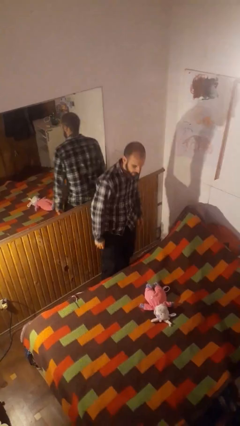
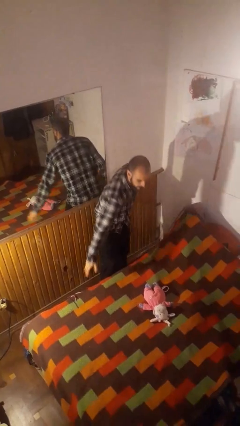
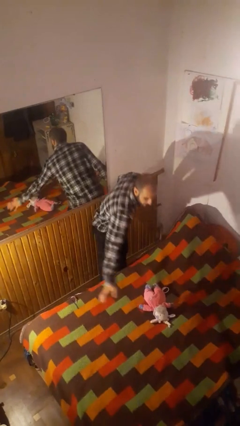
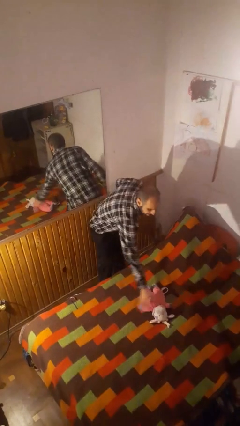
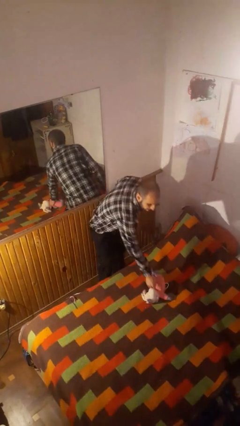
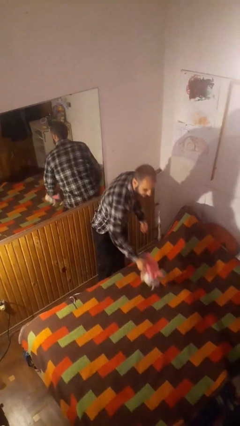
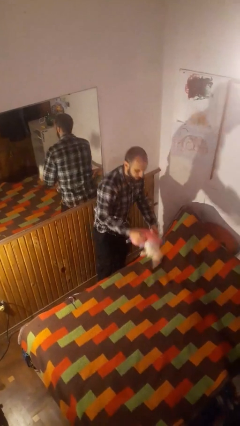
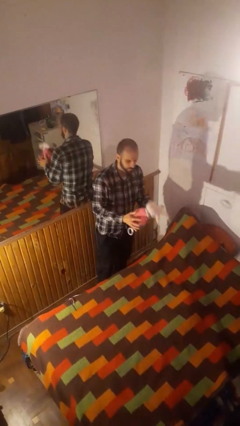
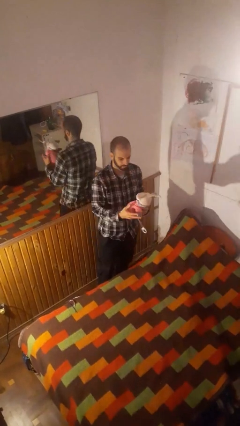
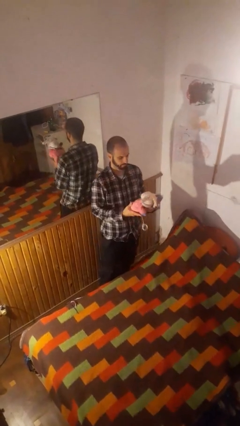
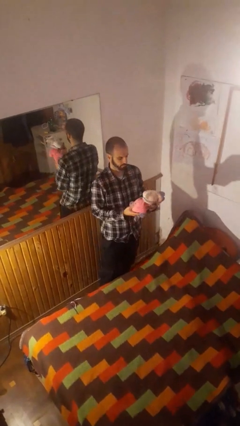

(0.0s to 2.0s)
person picks up object from bed

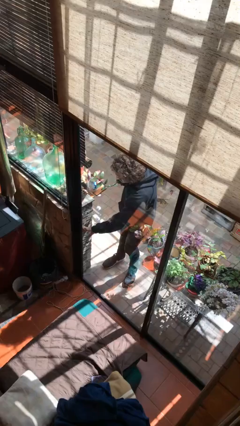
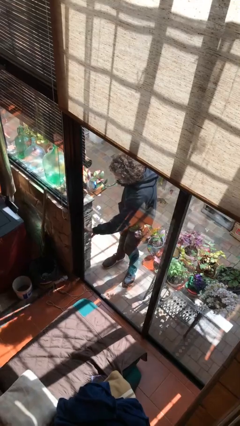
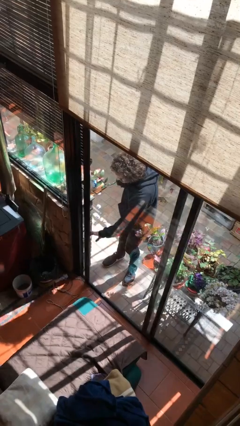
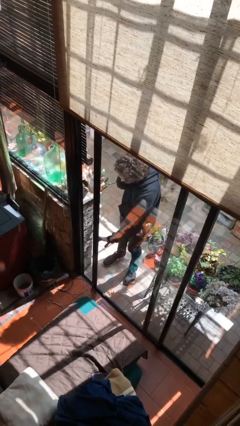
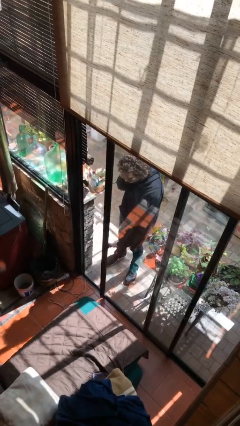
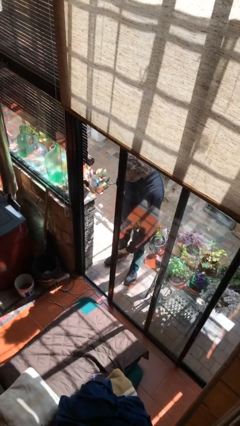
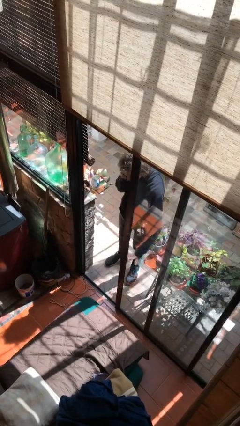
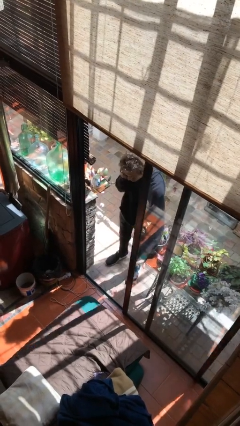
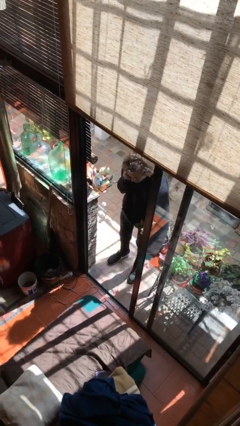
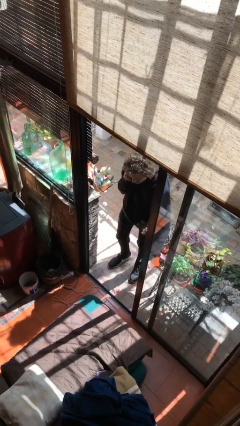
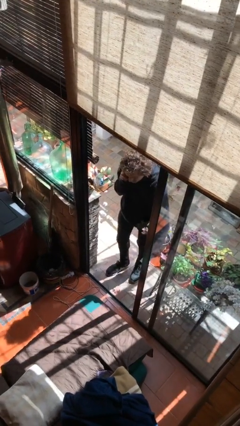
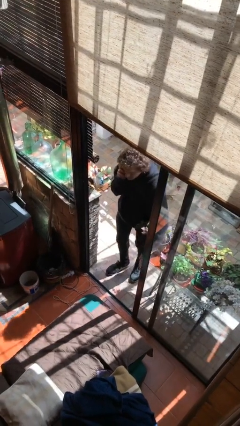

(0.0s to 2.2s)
person opens facility door

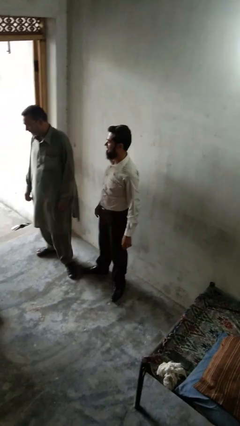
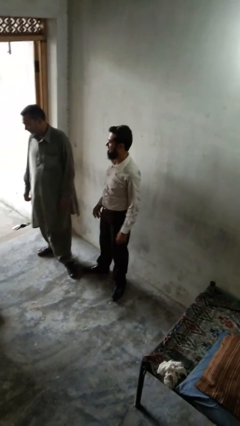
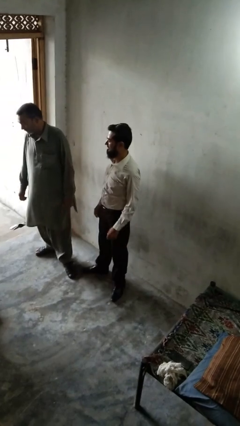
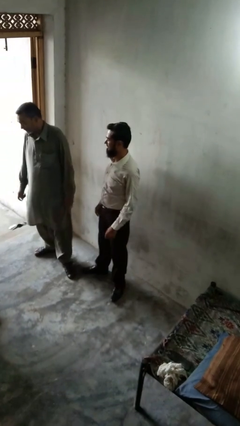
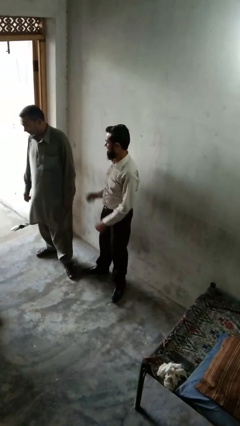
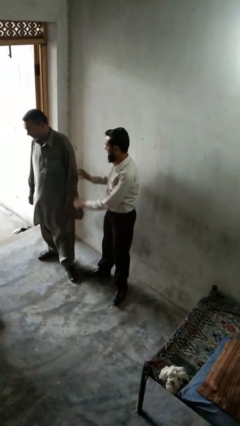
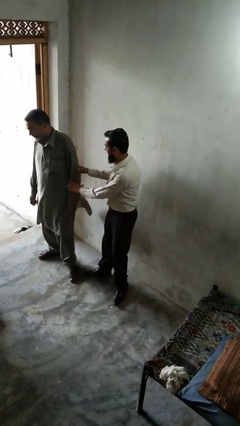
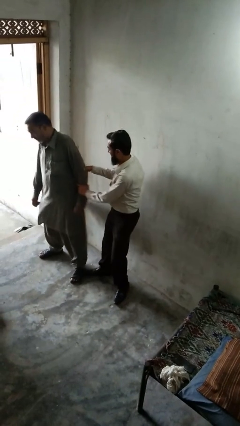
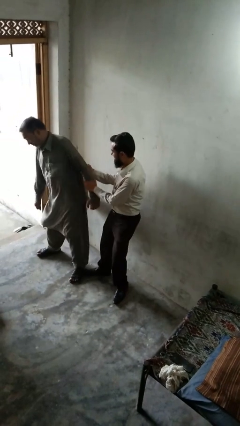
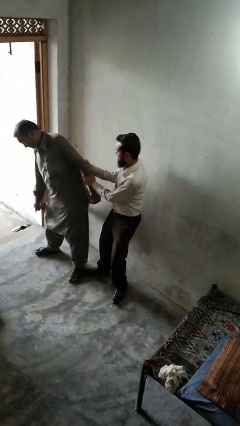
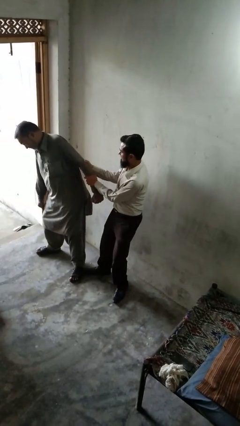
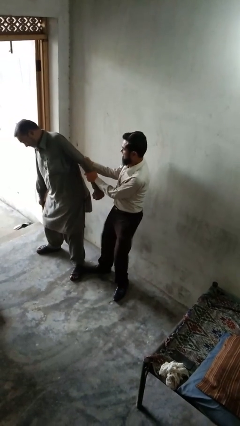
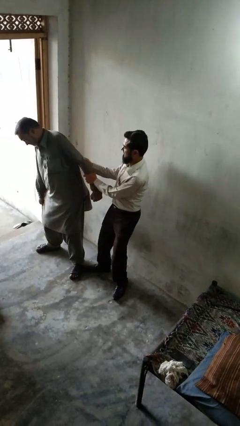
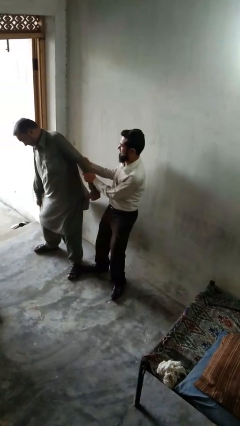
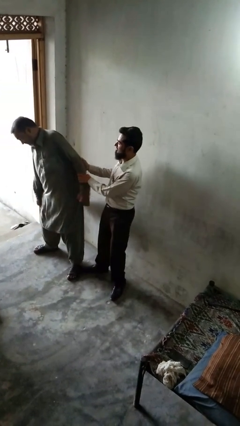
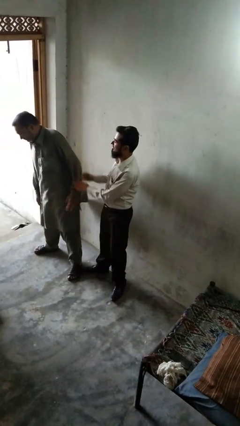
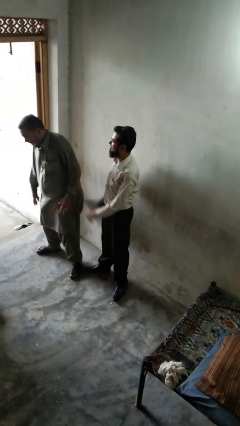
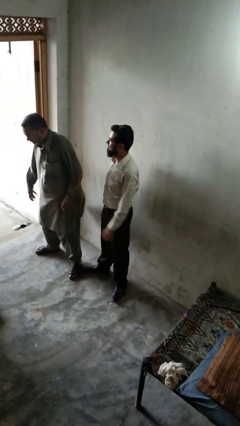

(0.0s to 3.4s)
person grabs person by forearm

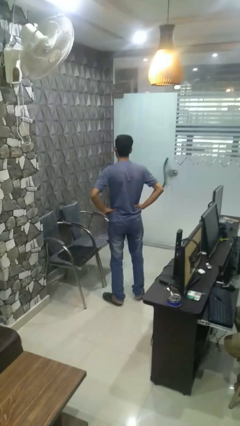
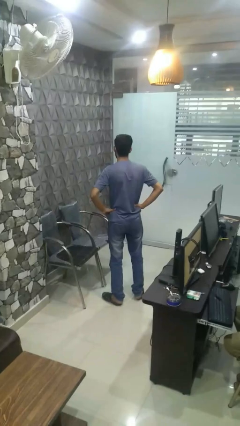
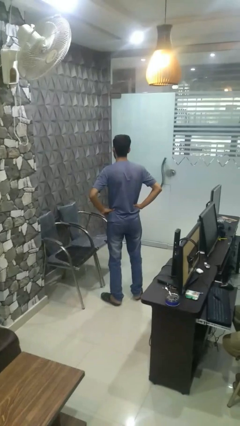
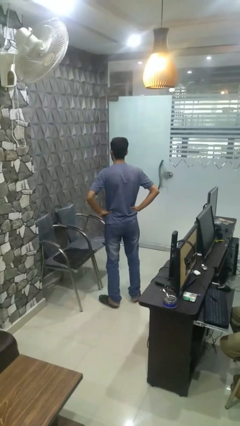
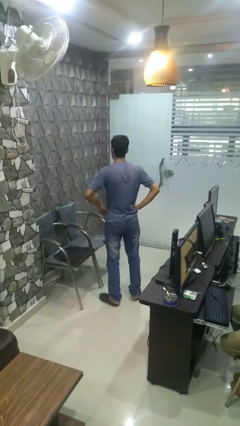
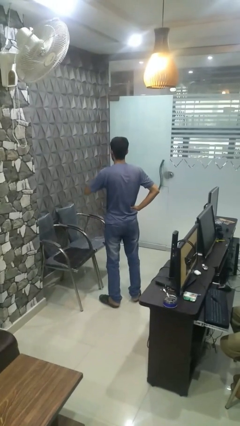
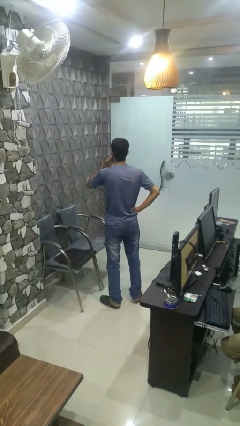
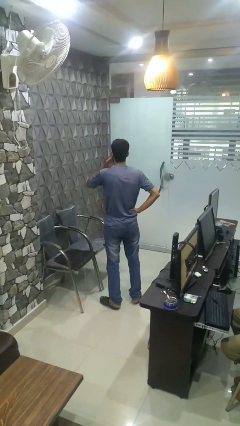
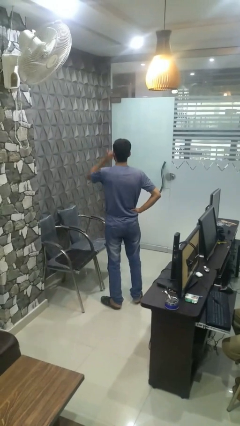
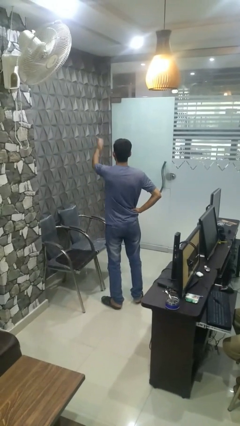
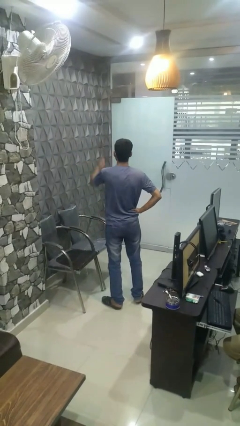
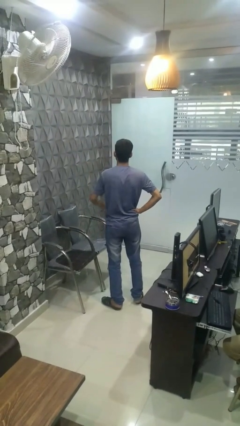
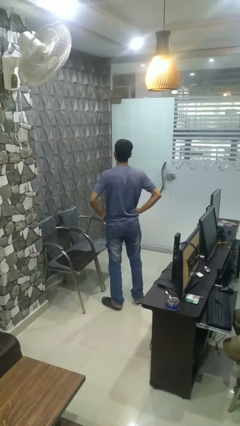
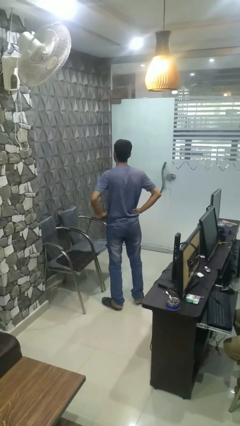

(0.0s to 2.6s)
person gestures blow kiss

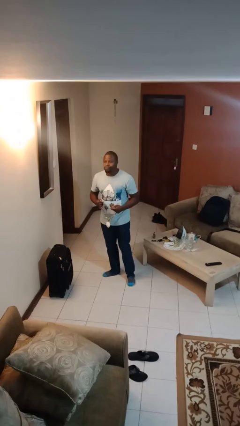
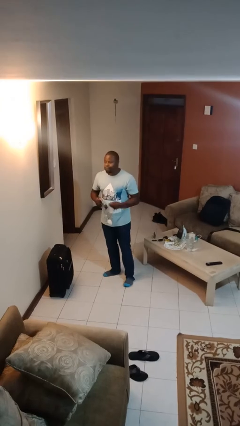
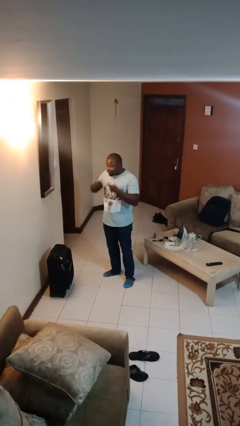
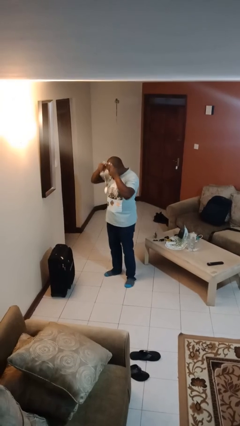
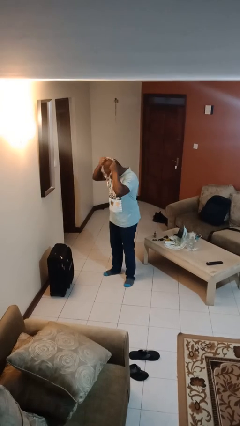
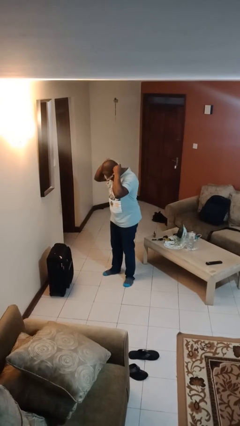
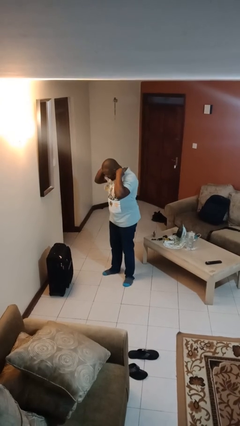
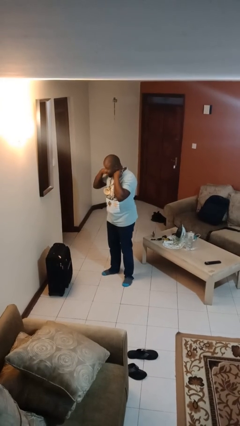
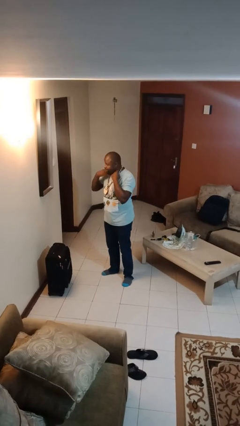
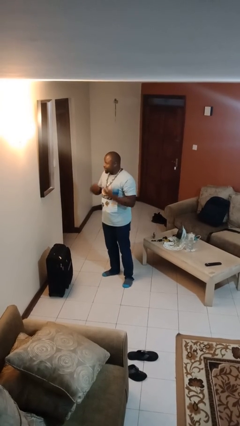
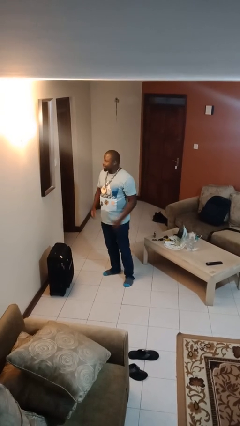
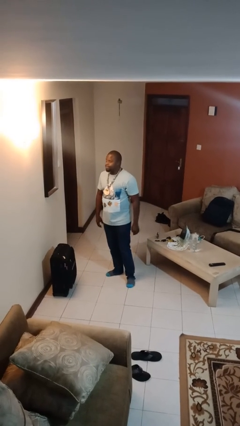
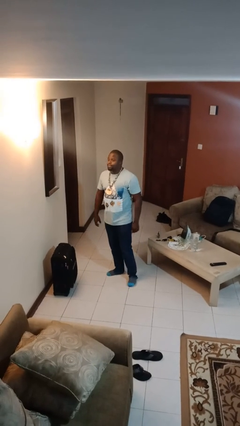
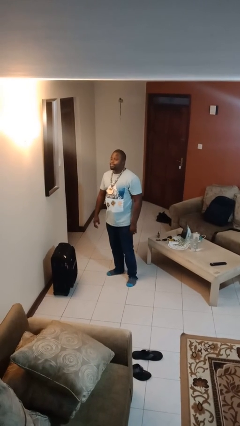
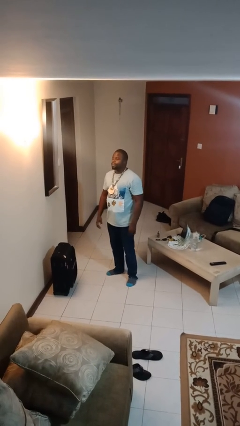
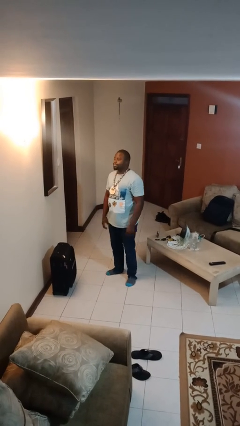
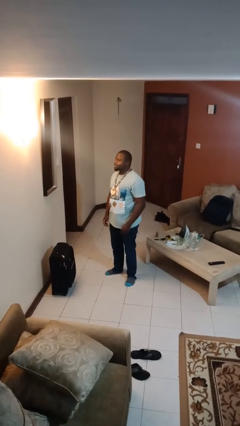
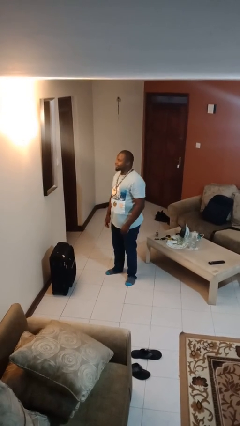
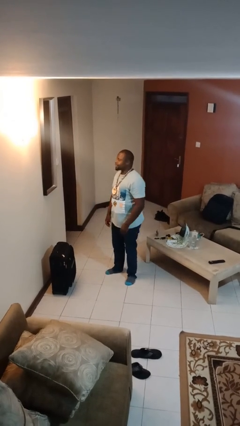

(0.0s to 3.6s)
person puts on necklace

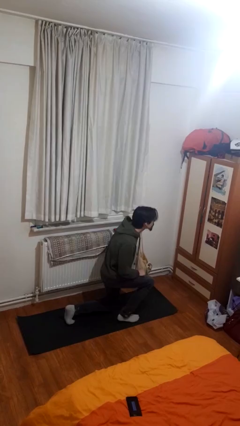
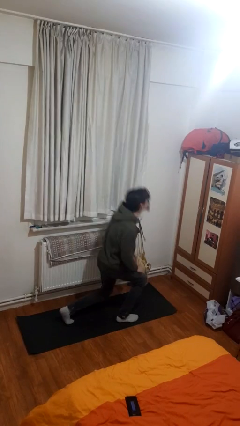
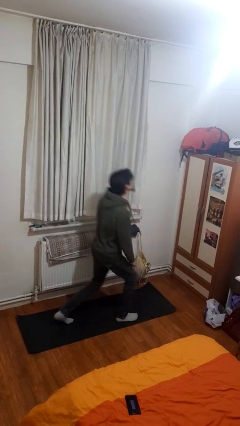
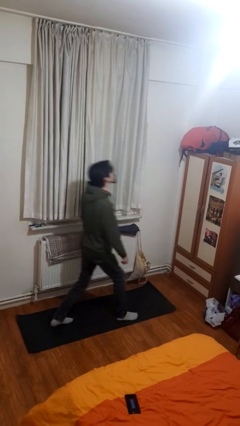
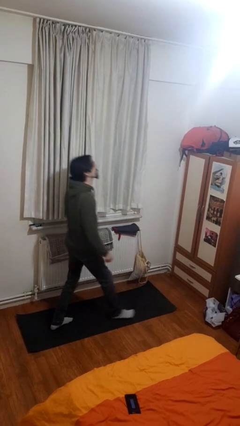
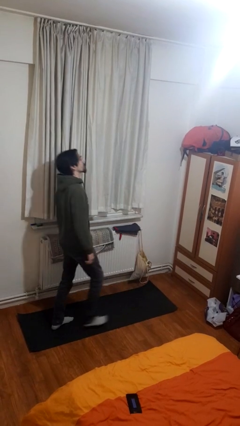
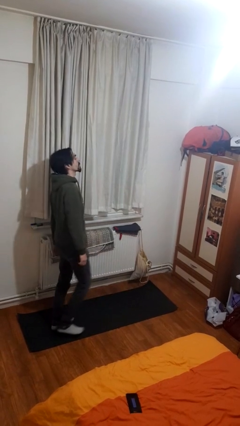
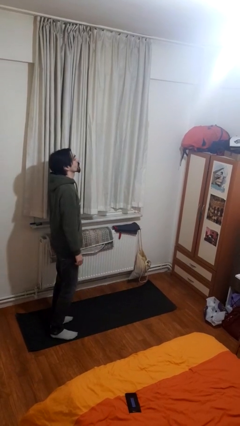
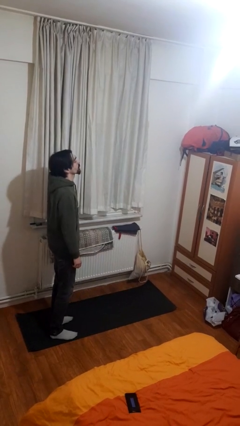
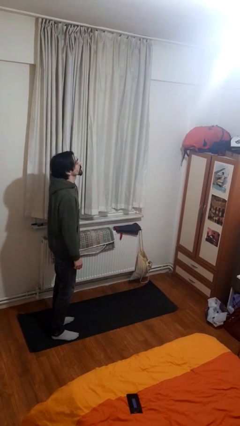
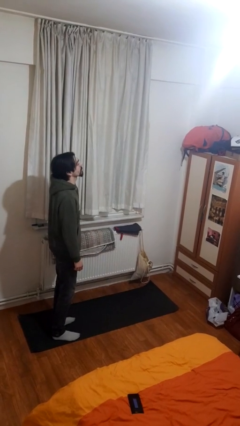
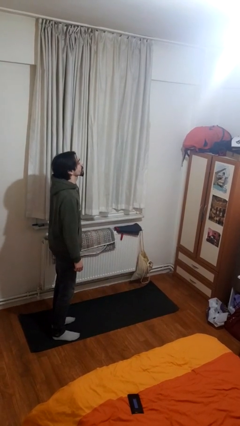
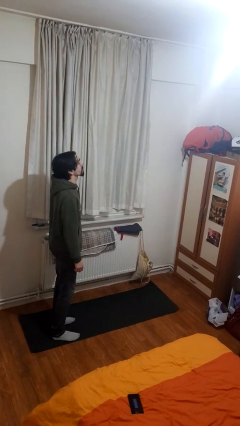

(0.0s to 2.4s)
person stands up from floor

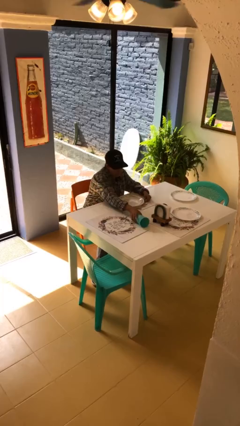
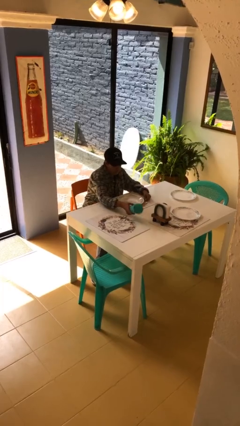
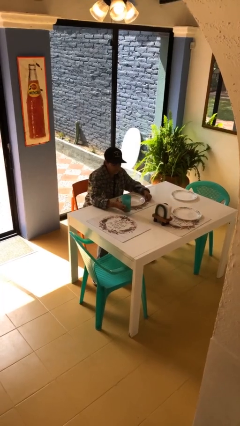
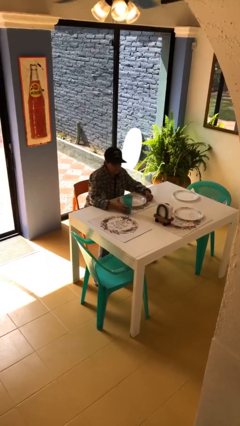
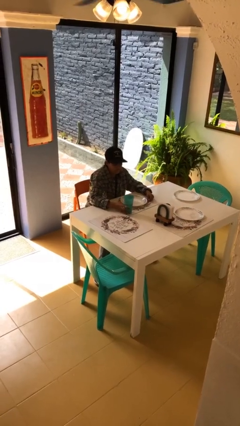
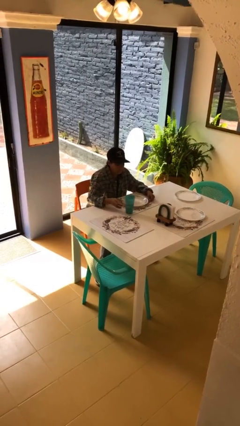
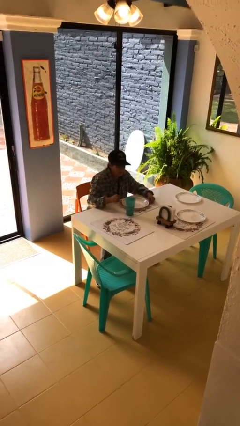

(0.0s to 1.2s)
person sets upright glass
